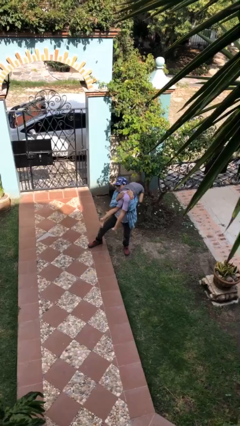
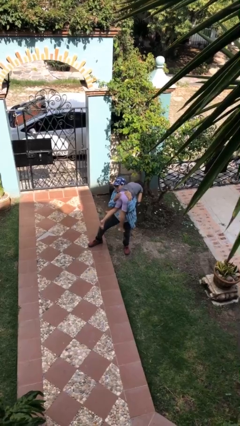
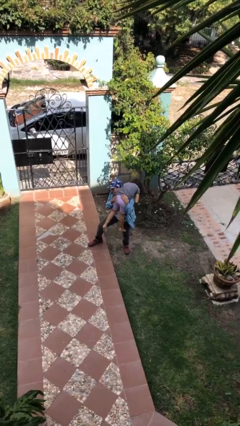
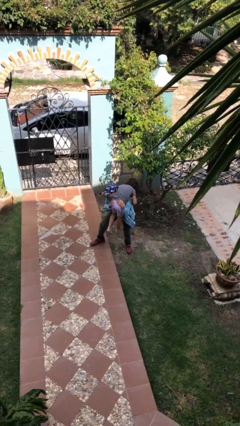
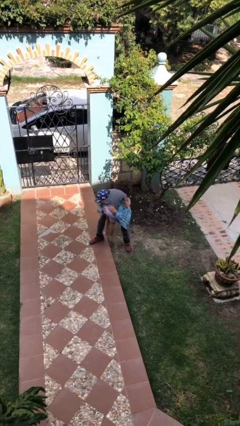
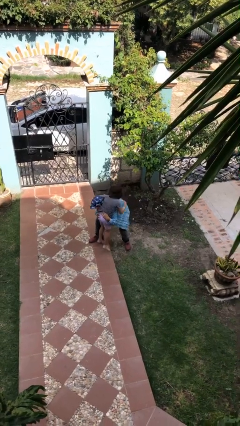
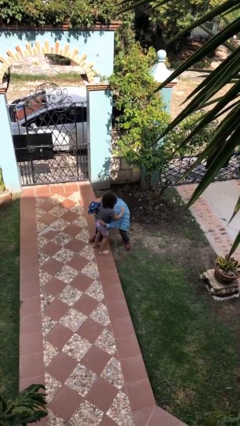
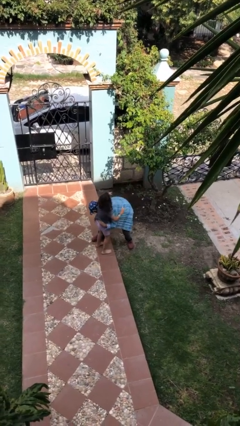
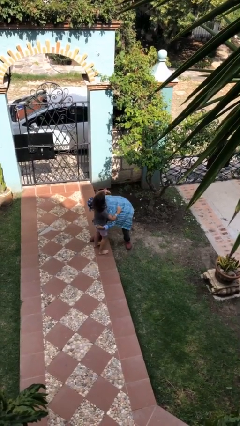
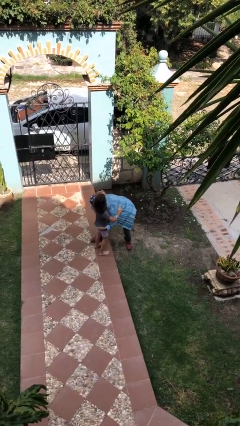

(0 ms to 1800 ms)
person puts down person

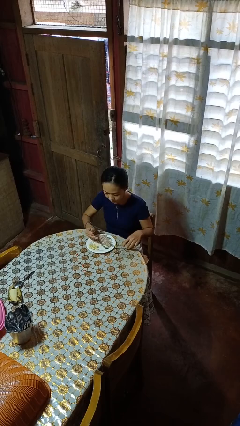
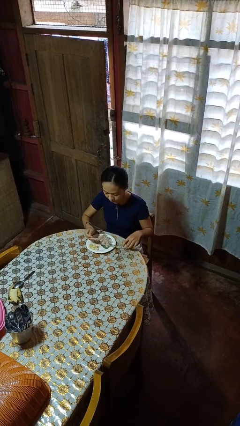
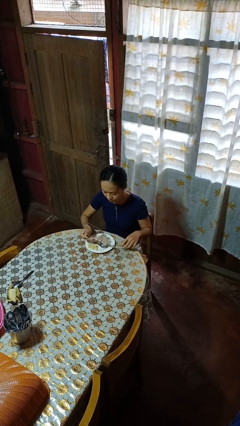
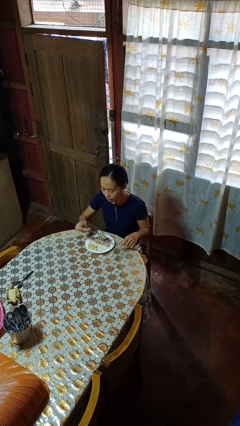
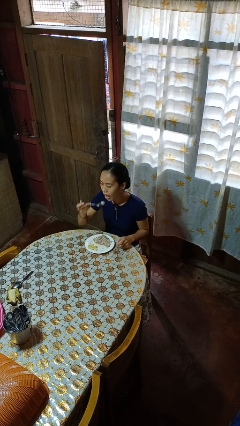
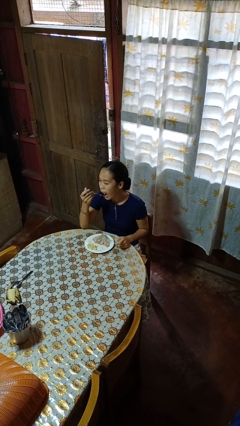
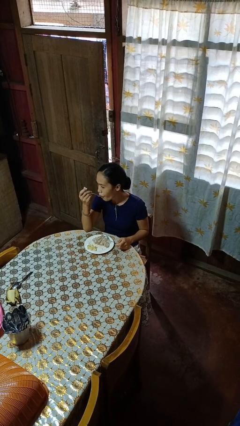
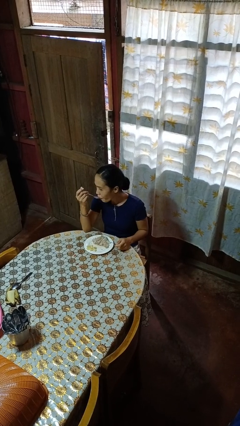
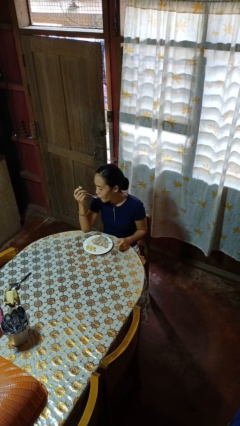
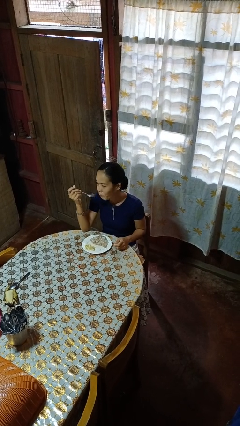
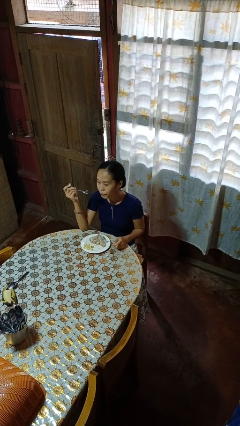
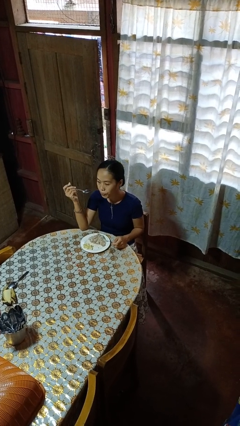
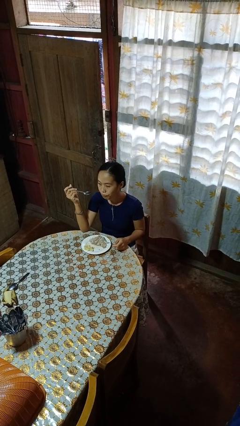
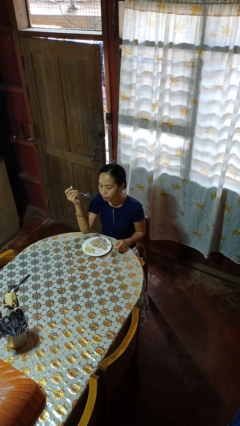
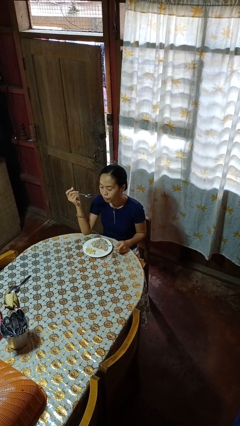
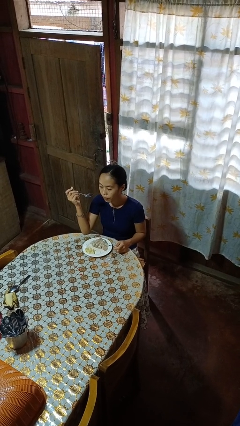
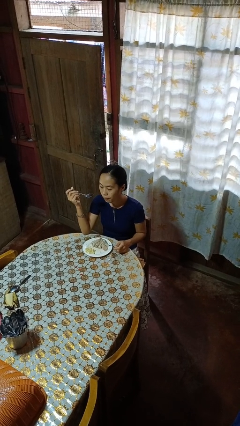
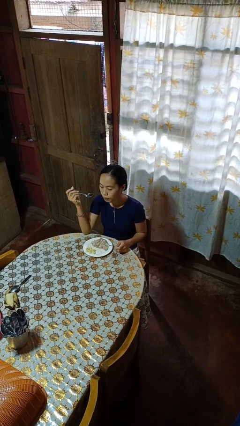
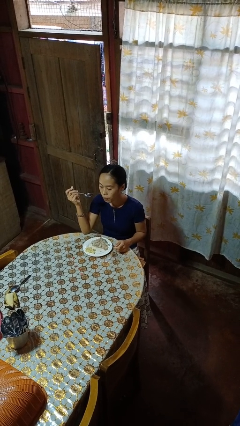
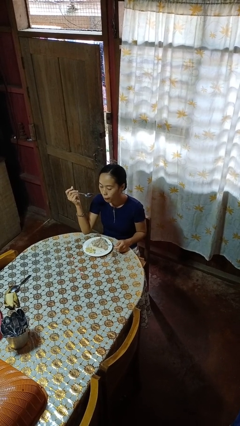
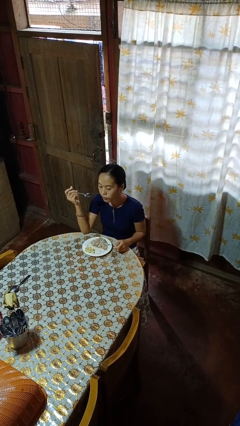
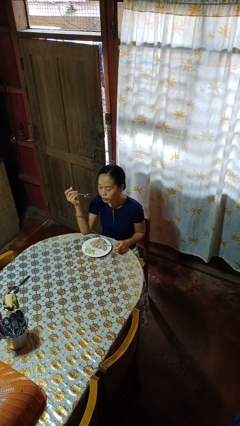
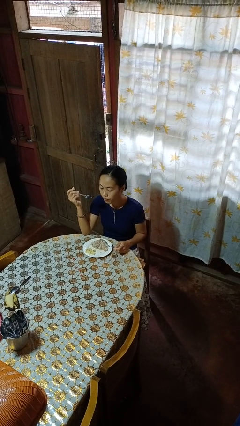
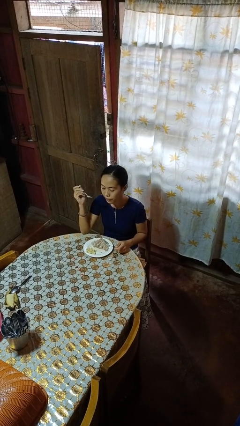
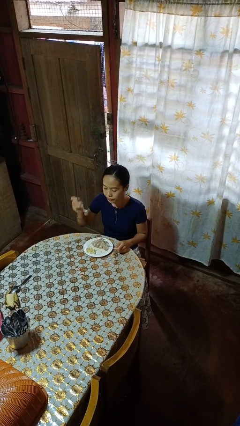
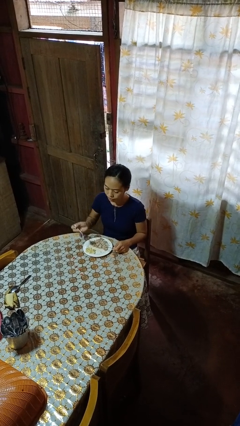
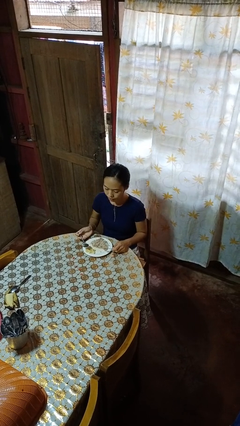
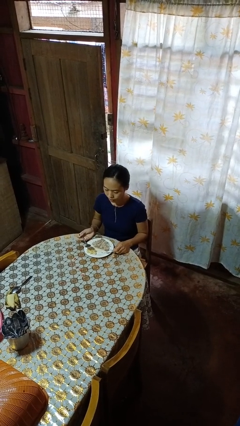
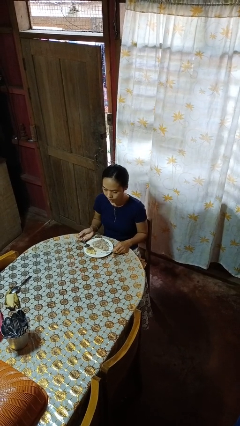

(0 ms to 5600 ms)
person eats with utensil

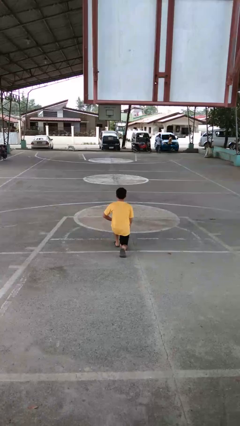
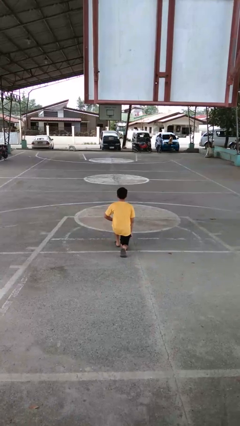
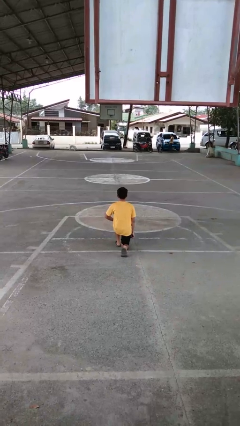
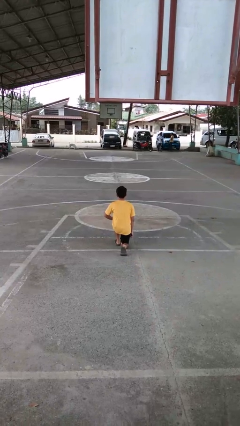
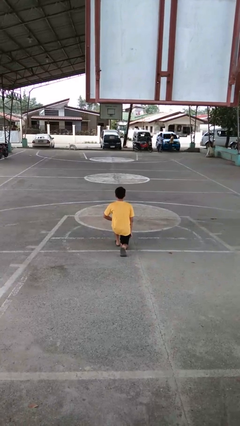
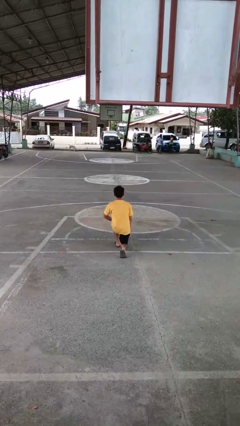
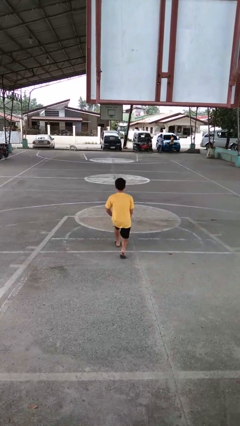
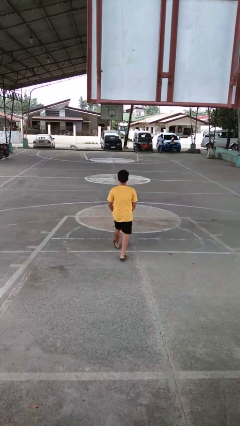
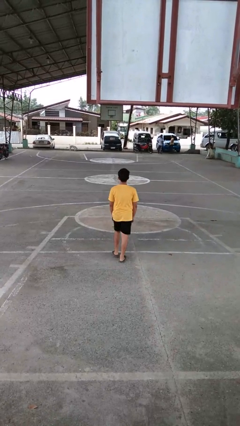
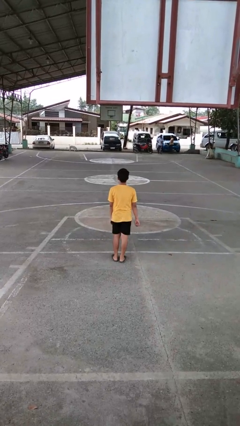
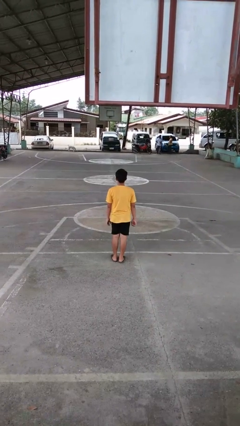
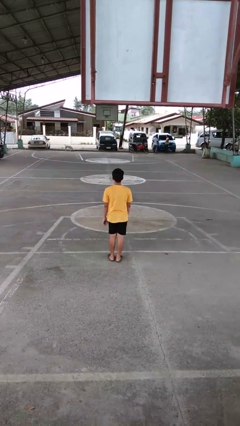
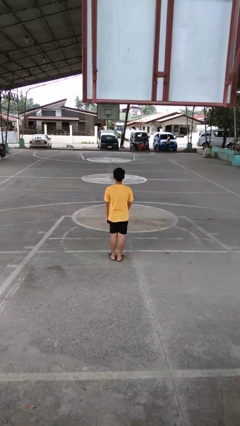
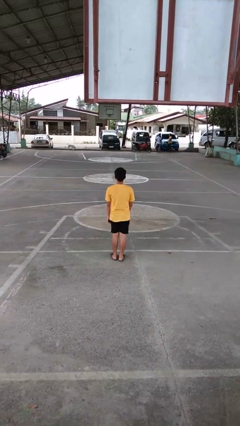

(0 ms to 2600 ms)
person stands up from floor

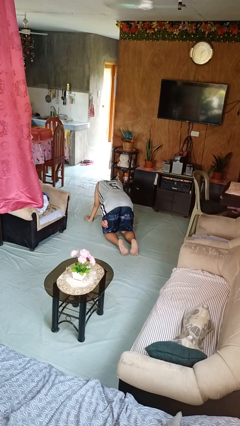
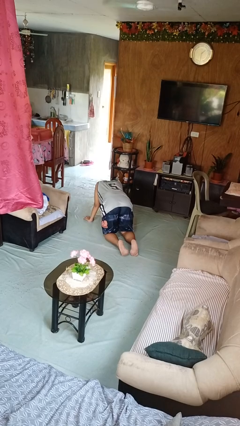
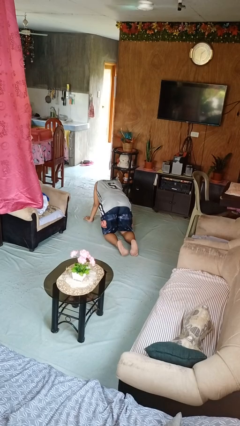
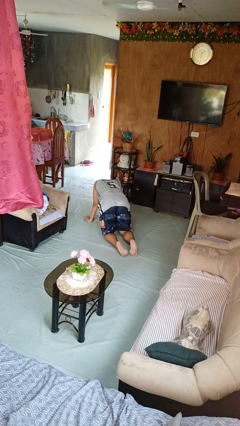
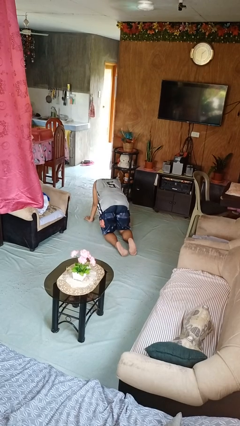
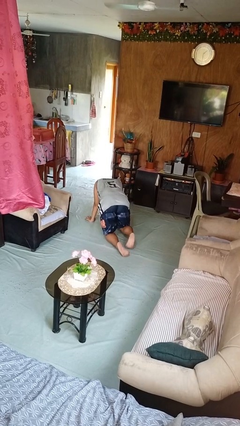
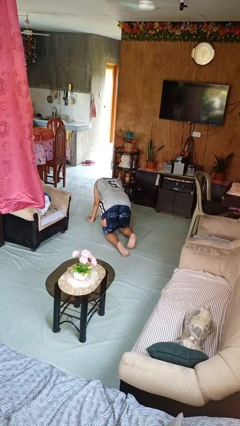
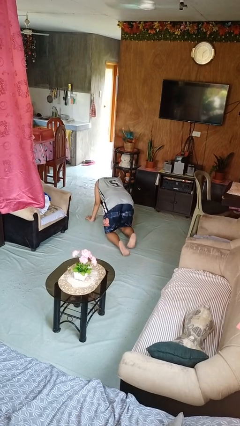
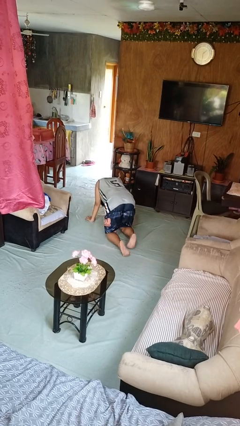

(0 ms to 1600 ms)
person crawls

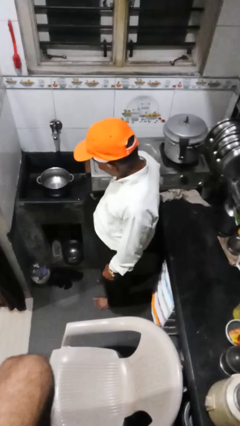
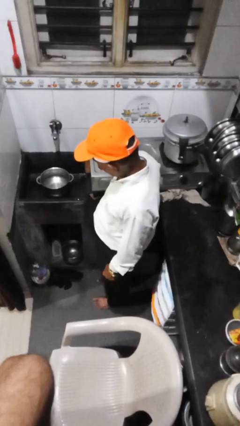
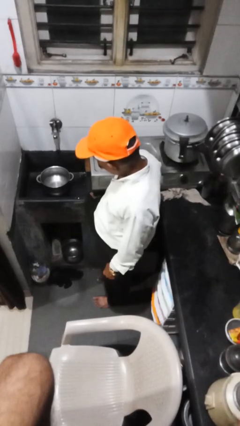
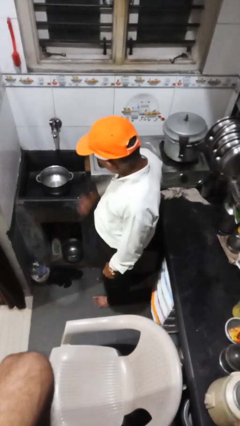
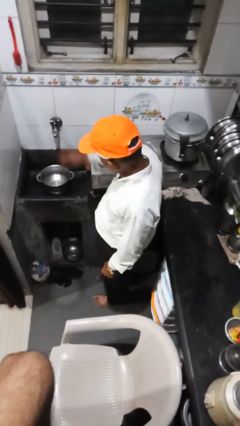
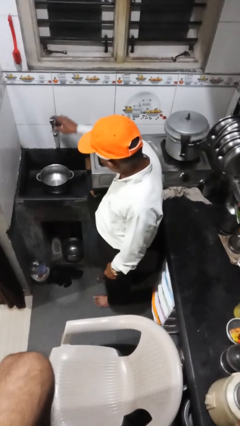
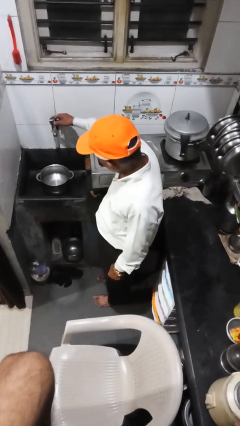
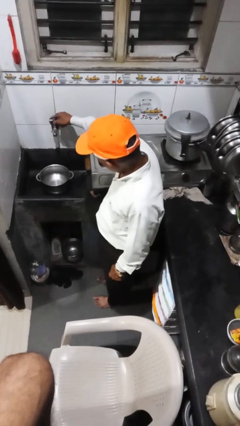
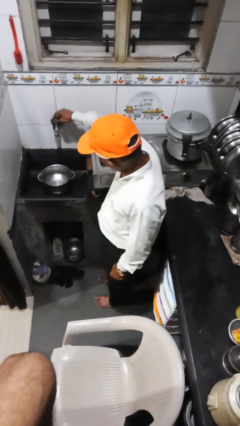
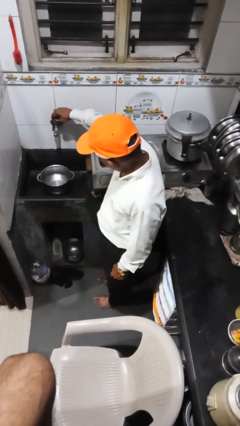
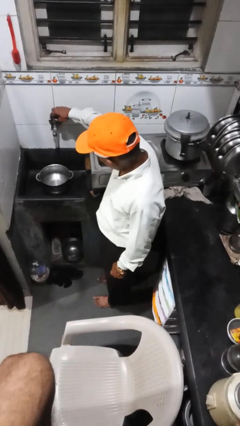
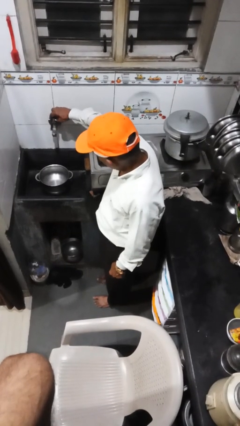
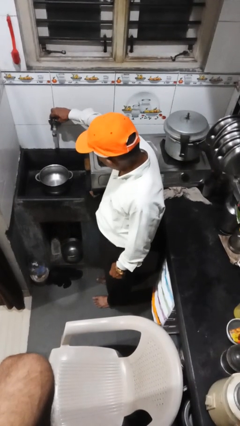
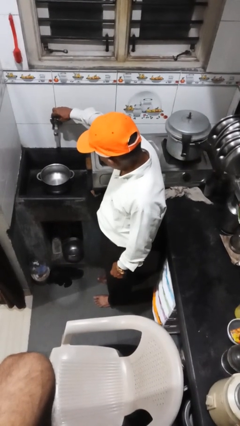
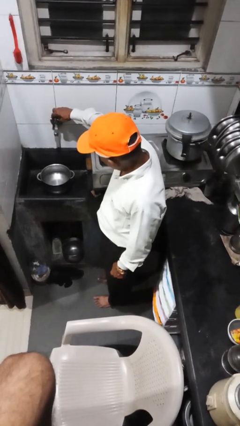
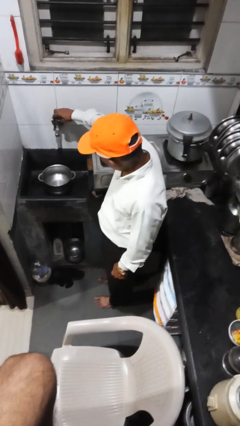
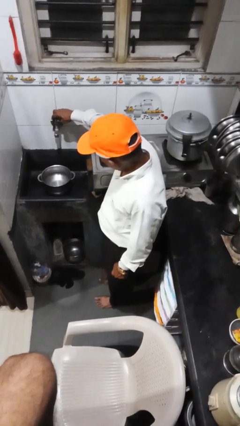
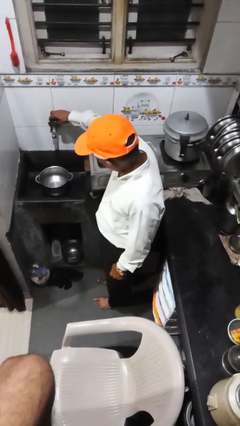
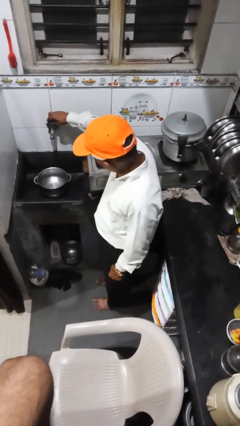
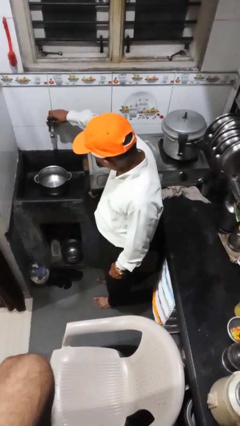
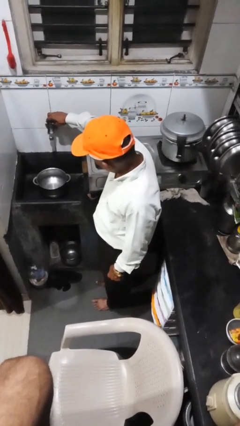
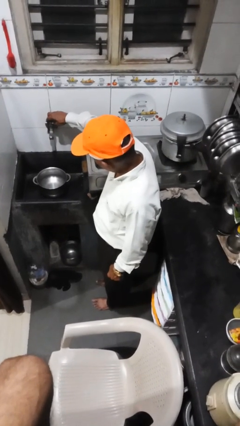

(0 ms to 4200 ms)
person turns on faucet

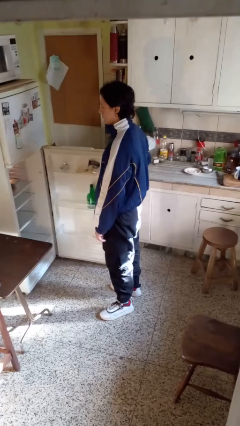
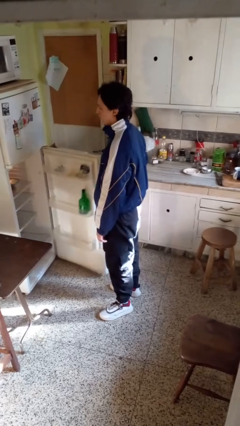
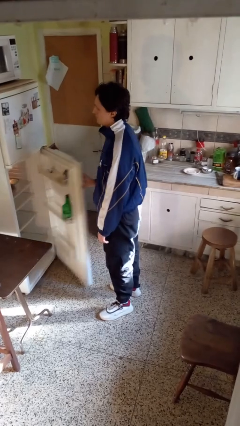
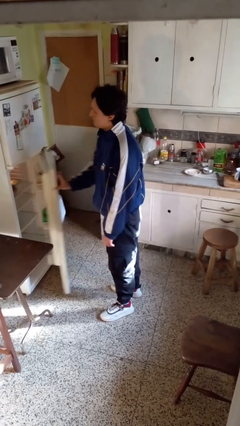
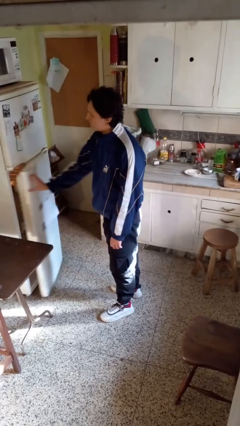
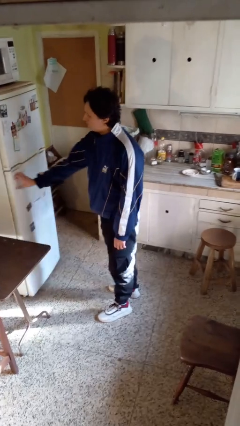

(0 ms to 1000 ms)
person closes refrigerator

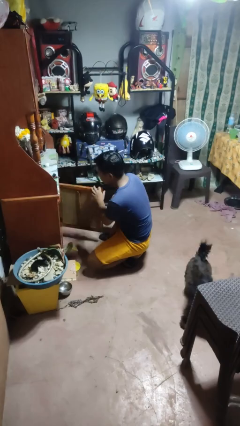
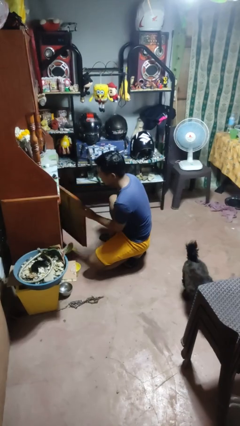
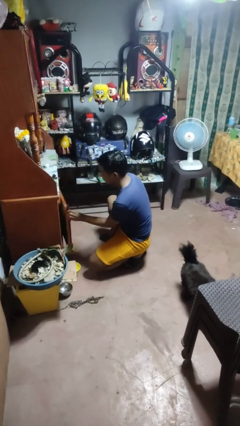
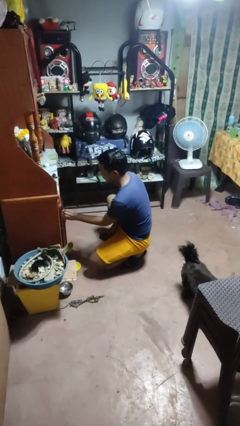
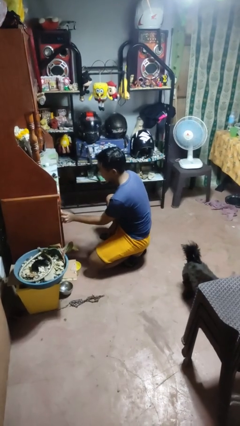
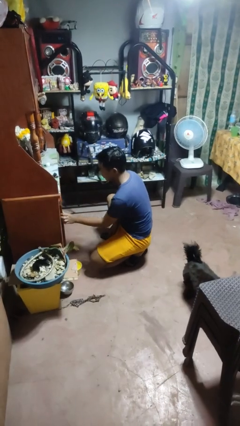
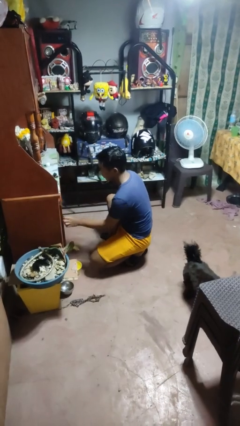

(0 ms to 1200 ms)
person closes cabinet
